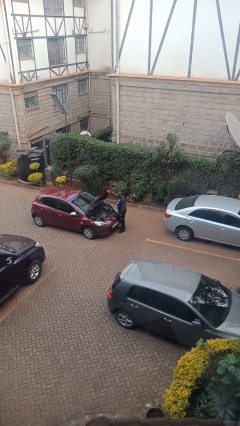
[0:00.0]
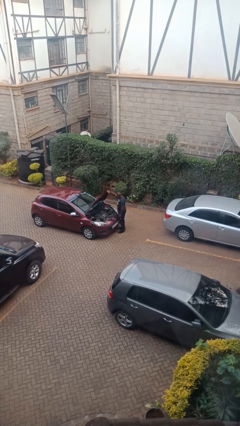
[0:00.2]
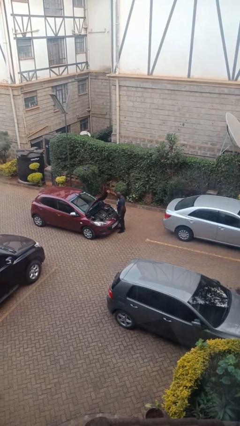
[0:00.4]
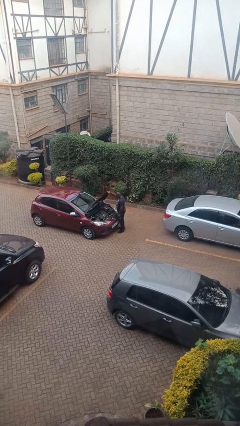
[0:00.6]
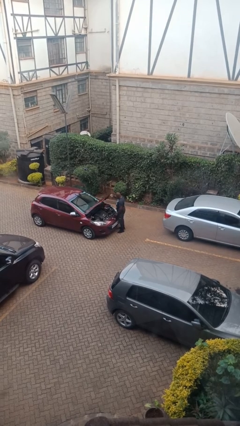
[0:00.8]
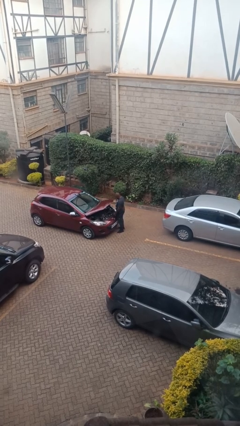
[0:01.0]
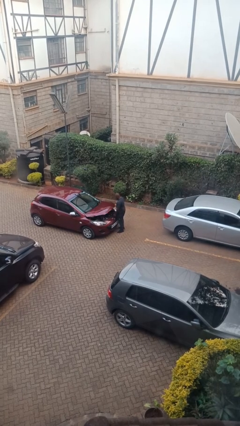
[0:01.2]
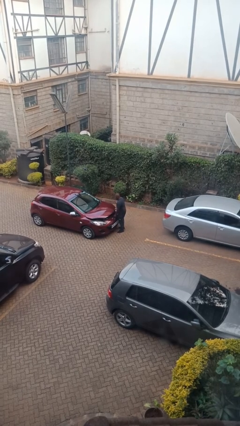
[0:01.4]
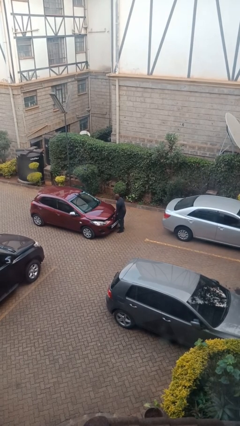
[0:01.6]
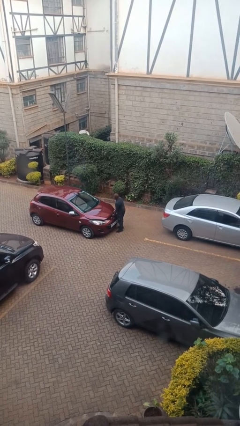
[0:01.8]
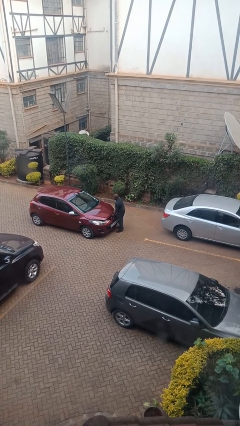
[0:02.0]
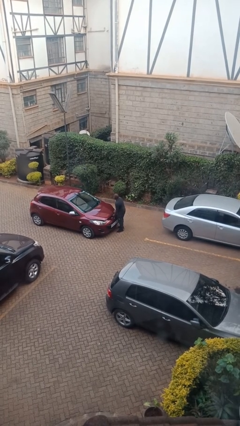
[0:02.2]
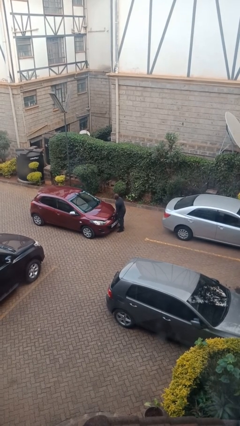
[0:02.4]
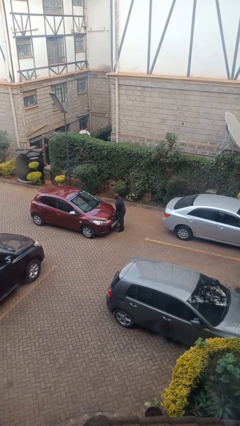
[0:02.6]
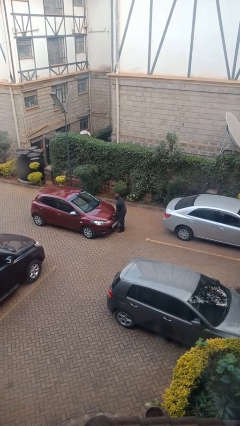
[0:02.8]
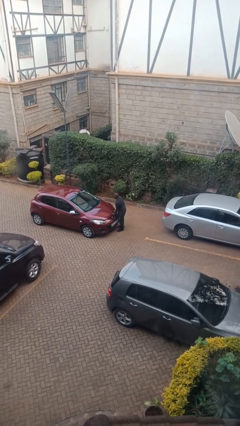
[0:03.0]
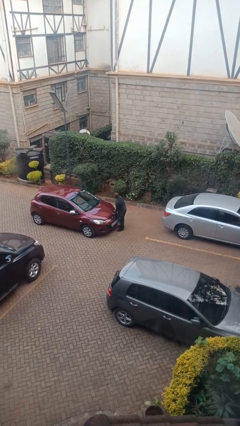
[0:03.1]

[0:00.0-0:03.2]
person closes car hood

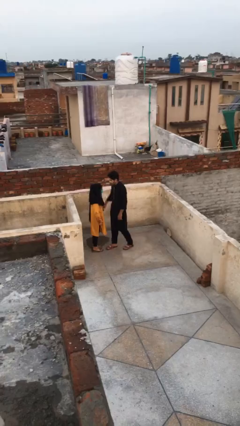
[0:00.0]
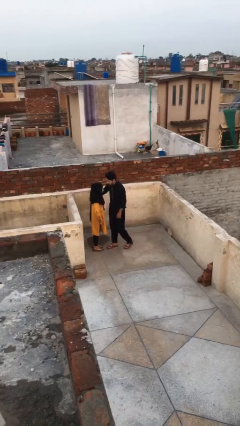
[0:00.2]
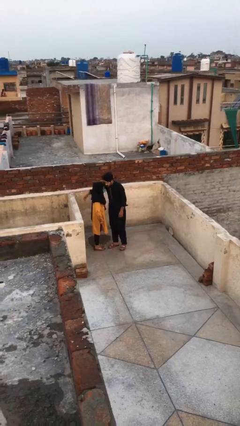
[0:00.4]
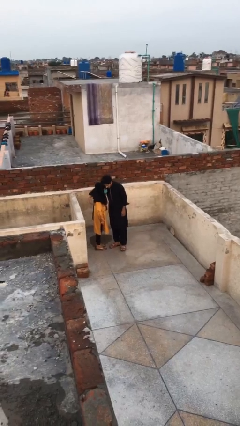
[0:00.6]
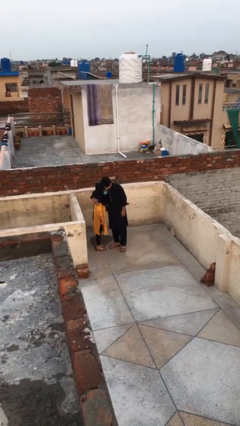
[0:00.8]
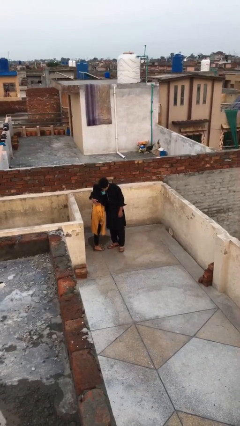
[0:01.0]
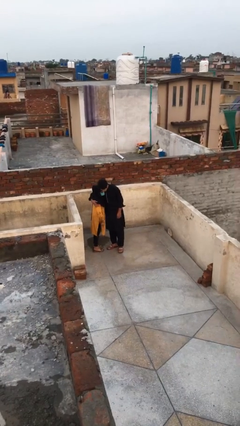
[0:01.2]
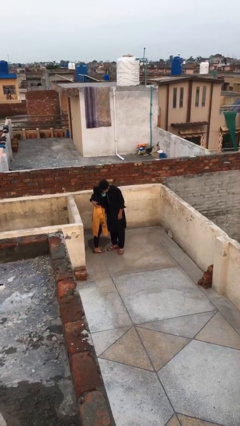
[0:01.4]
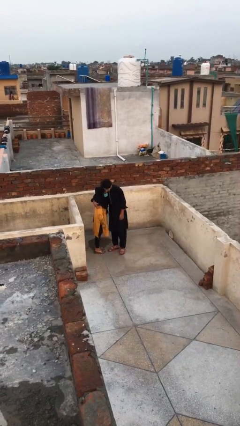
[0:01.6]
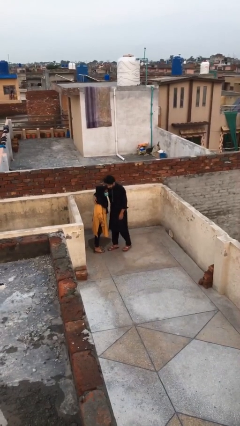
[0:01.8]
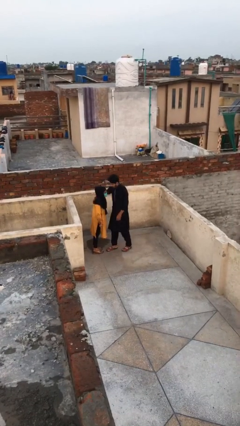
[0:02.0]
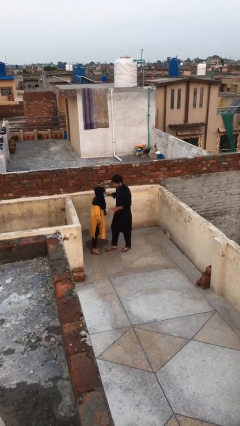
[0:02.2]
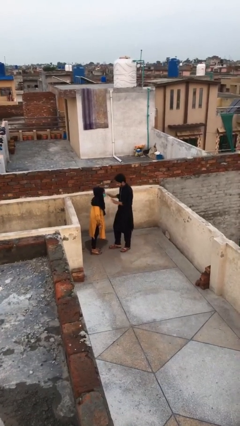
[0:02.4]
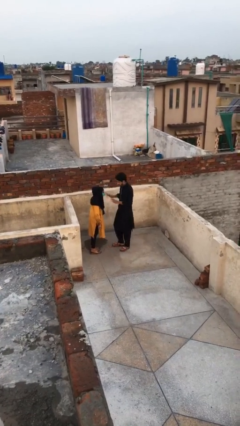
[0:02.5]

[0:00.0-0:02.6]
person embraces person

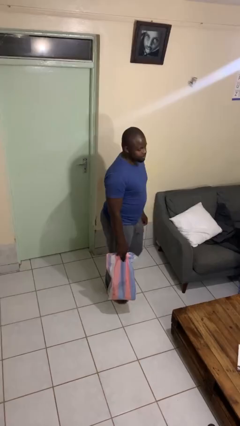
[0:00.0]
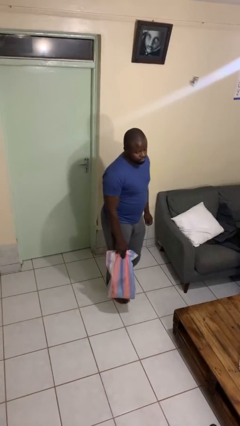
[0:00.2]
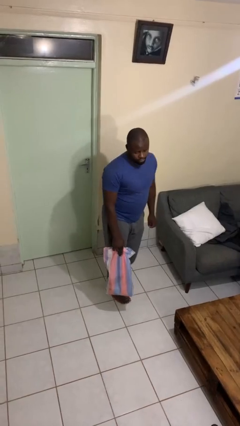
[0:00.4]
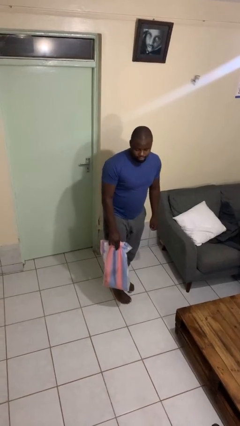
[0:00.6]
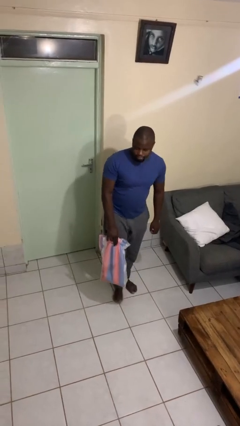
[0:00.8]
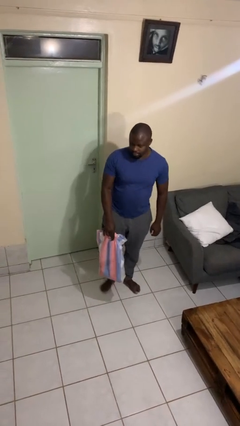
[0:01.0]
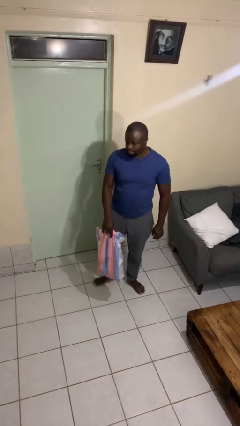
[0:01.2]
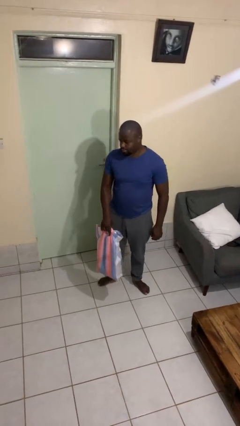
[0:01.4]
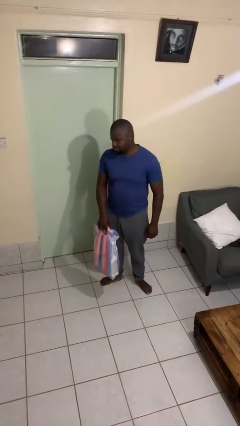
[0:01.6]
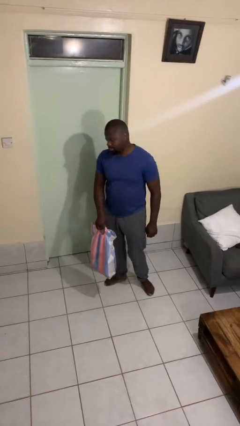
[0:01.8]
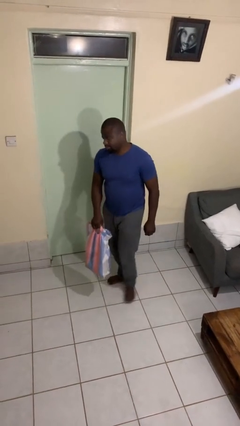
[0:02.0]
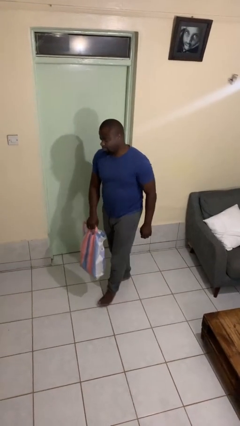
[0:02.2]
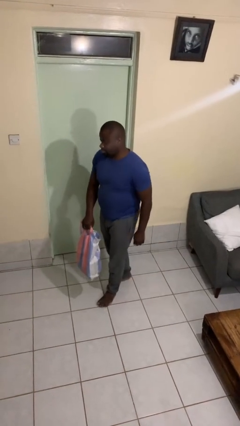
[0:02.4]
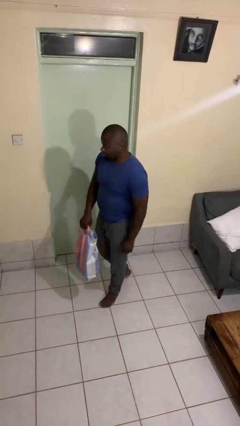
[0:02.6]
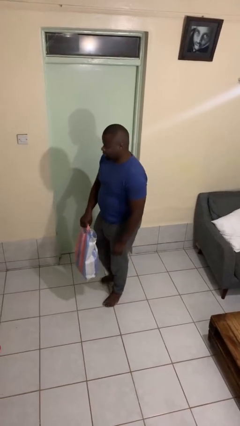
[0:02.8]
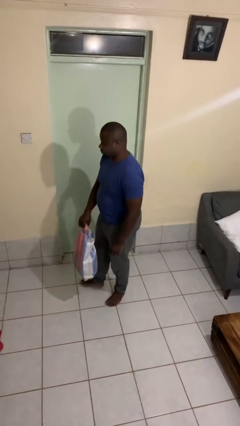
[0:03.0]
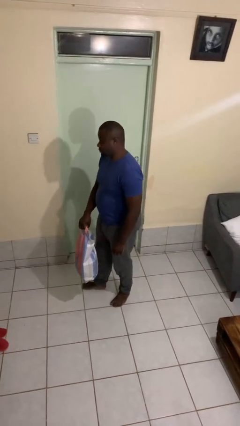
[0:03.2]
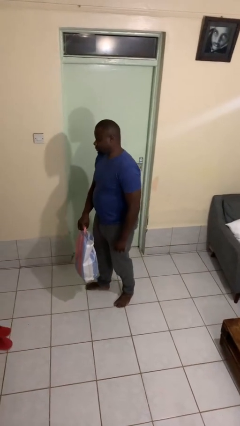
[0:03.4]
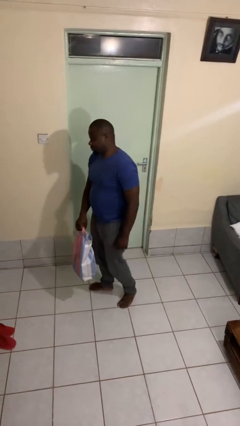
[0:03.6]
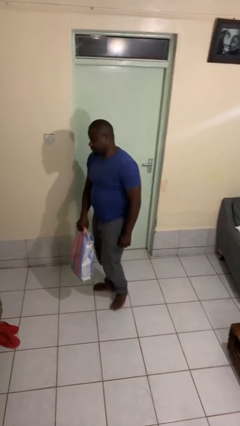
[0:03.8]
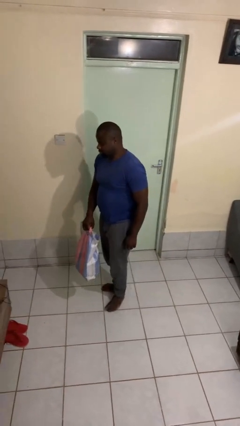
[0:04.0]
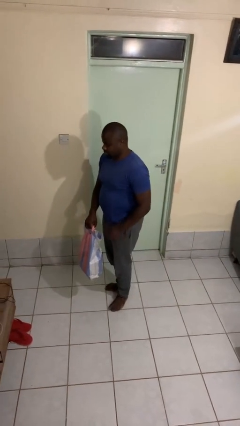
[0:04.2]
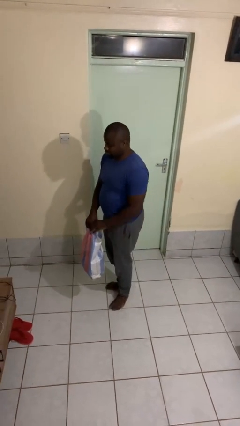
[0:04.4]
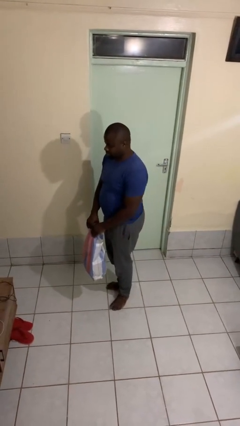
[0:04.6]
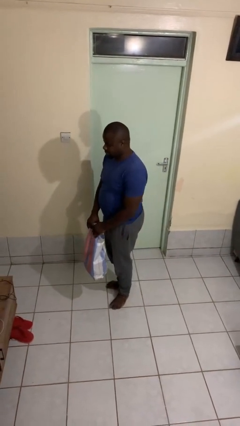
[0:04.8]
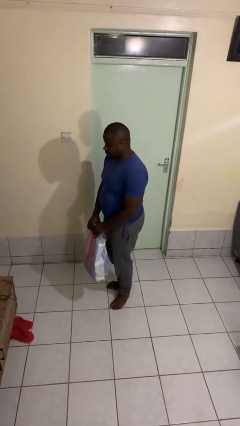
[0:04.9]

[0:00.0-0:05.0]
person carries groceries

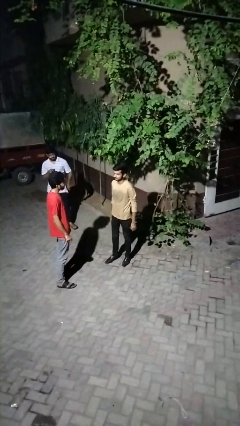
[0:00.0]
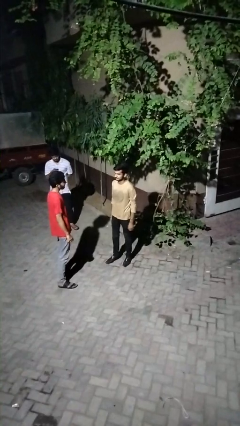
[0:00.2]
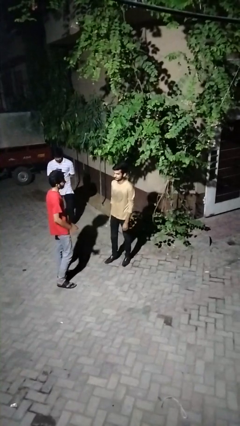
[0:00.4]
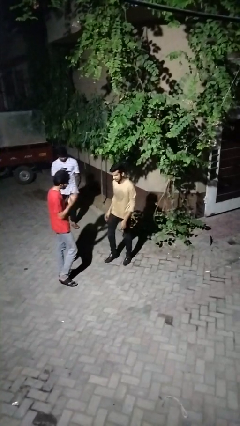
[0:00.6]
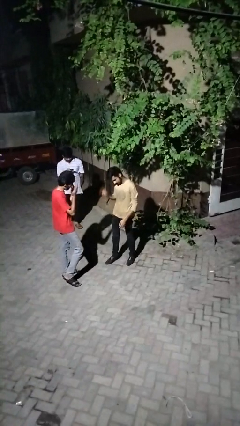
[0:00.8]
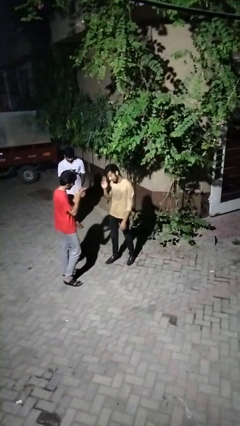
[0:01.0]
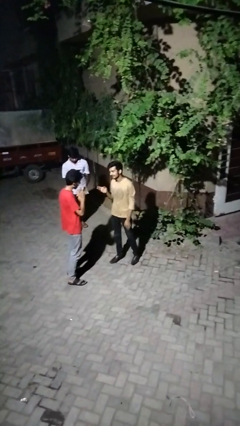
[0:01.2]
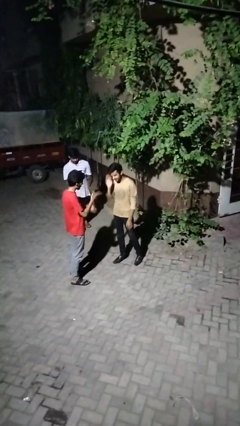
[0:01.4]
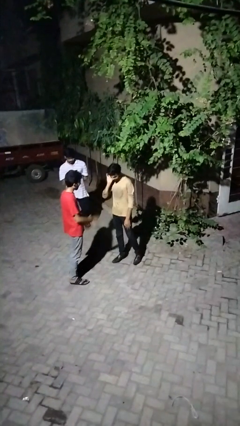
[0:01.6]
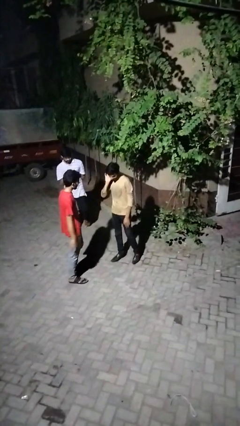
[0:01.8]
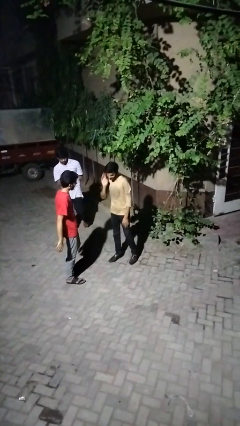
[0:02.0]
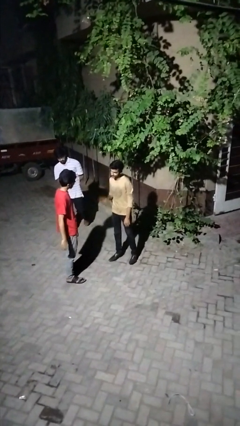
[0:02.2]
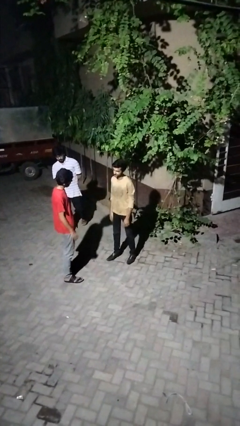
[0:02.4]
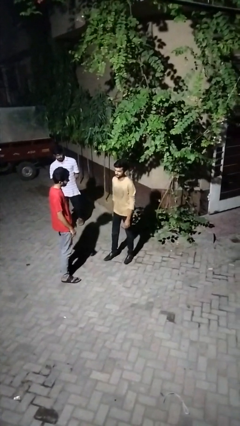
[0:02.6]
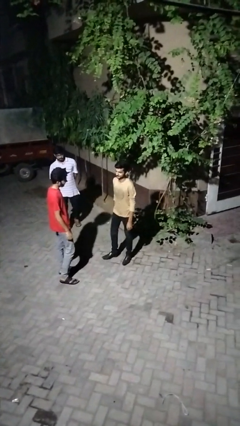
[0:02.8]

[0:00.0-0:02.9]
person talks to person

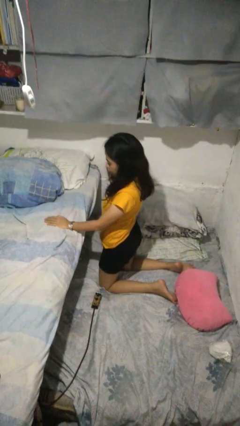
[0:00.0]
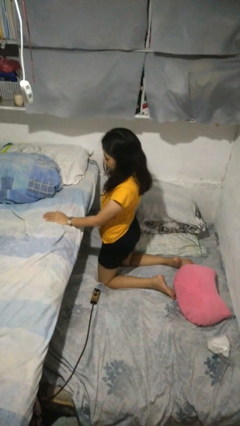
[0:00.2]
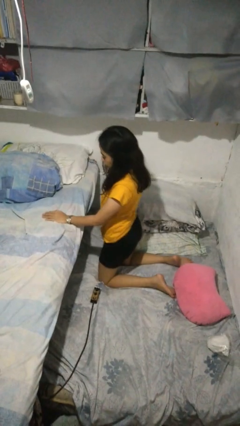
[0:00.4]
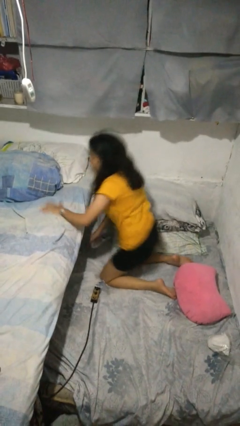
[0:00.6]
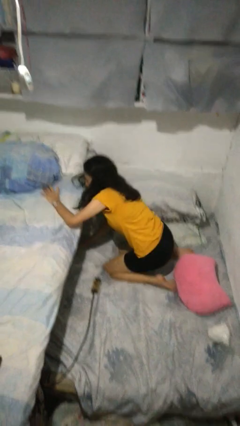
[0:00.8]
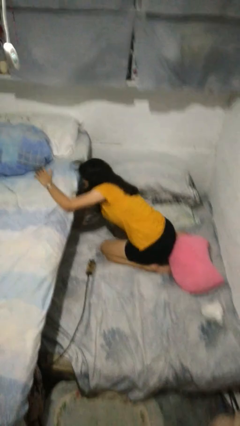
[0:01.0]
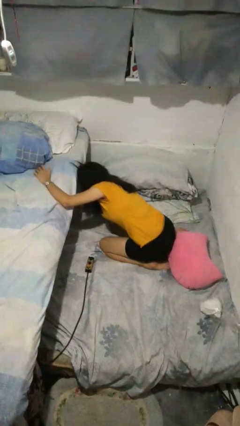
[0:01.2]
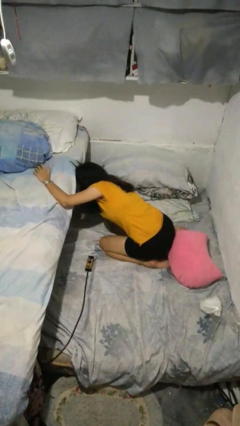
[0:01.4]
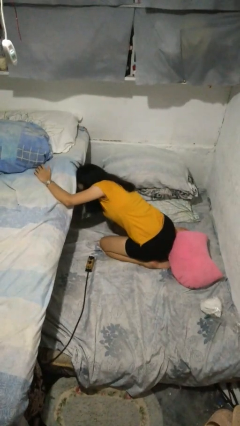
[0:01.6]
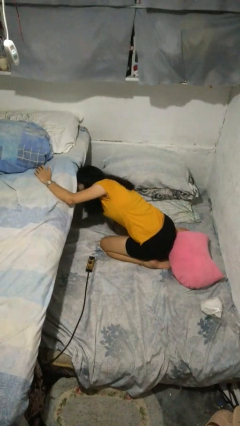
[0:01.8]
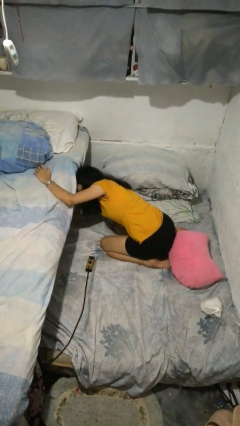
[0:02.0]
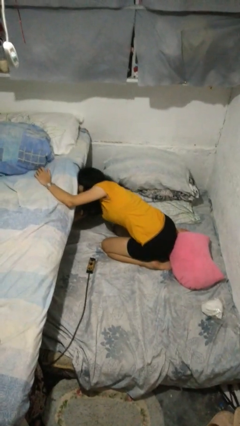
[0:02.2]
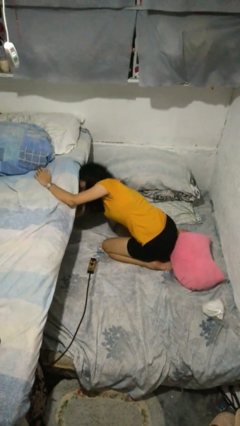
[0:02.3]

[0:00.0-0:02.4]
person searches under bed

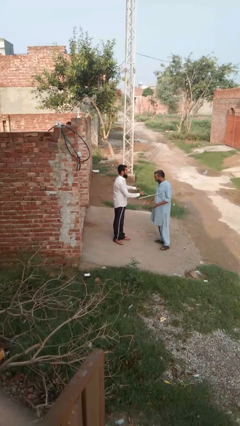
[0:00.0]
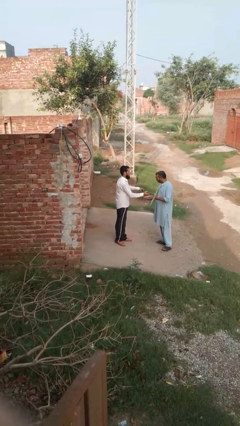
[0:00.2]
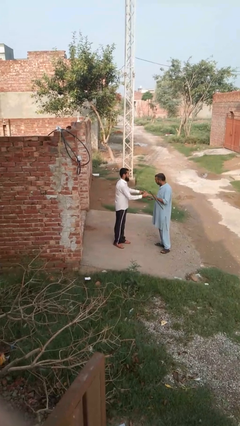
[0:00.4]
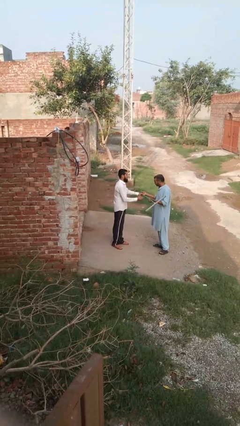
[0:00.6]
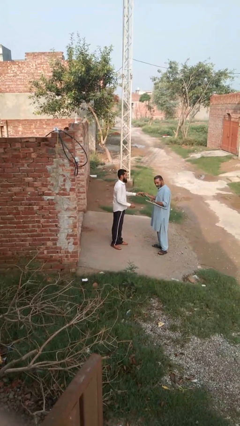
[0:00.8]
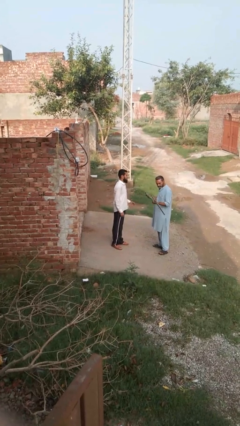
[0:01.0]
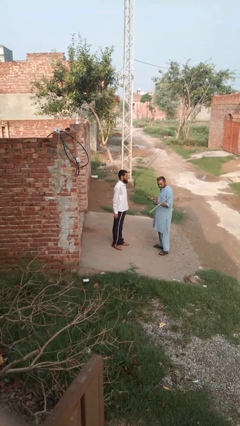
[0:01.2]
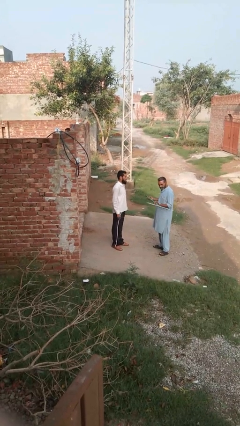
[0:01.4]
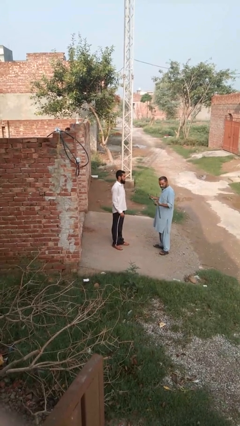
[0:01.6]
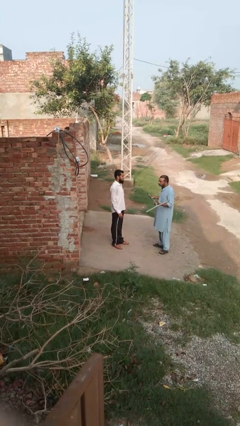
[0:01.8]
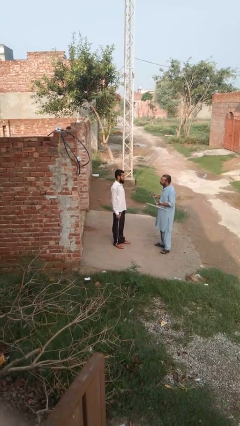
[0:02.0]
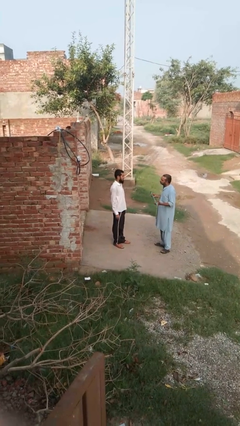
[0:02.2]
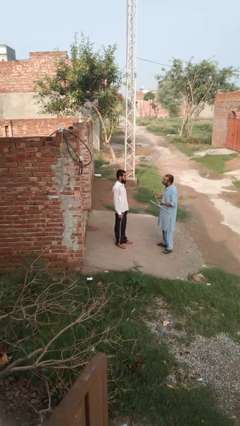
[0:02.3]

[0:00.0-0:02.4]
person transfers object to person
